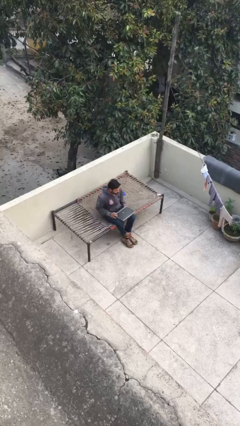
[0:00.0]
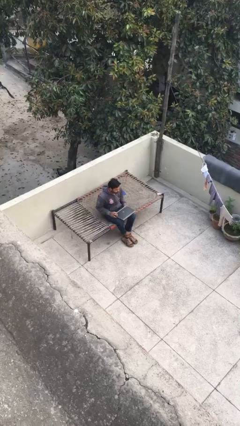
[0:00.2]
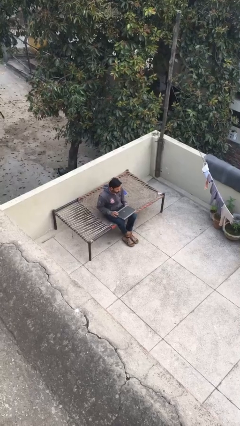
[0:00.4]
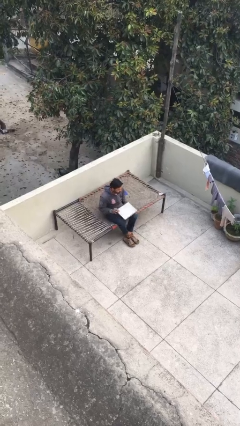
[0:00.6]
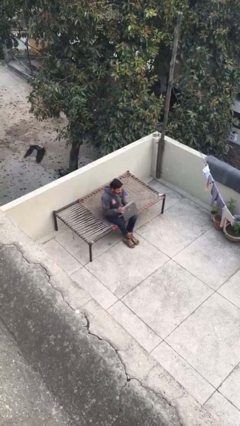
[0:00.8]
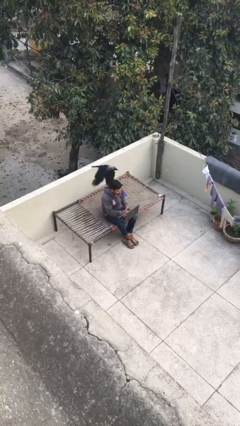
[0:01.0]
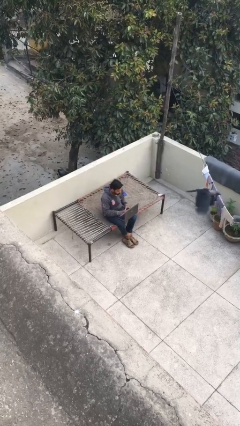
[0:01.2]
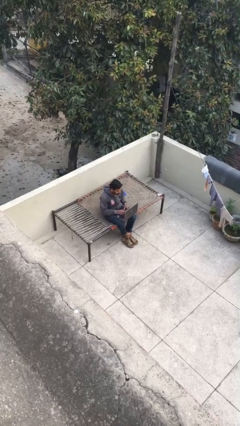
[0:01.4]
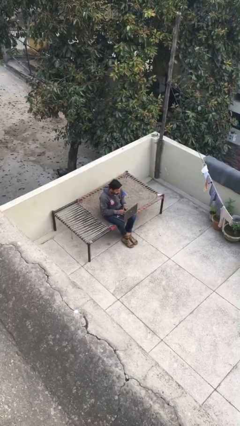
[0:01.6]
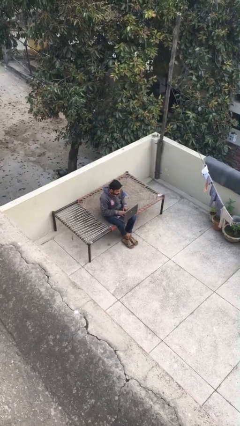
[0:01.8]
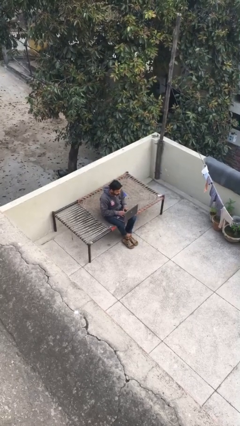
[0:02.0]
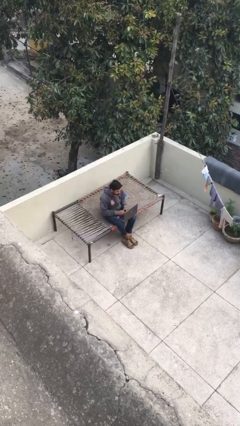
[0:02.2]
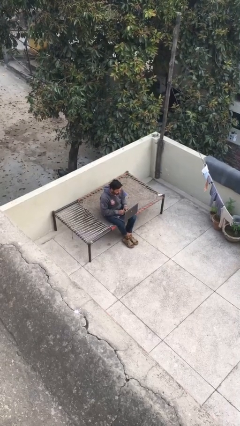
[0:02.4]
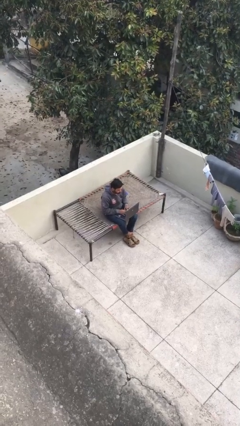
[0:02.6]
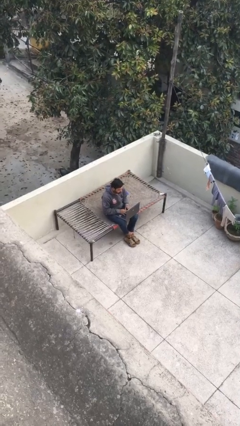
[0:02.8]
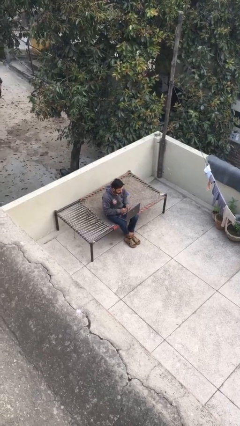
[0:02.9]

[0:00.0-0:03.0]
person interacts with laptop

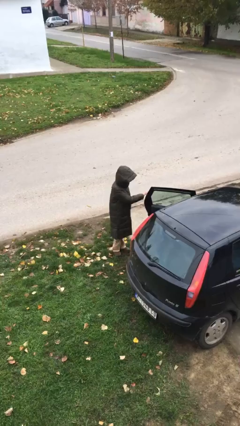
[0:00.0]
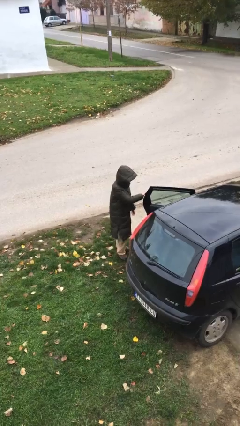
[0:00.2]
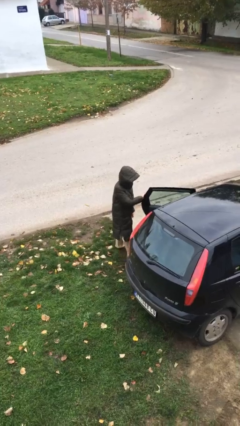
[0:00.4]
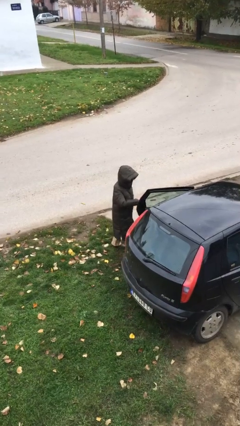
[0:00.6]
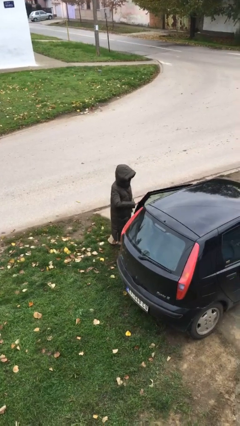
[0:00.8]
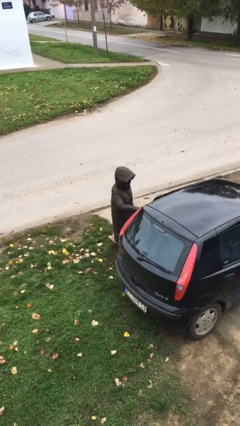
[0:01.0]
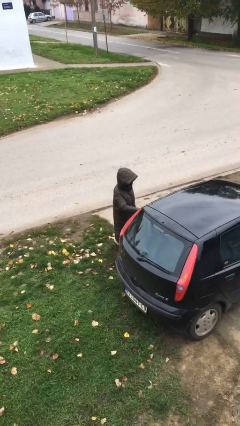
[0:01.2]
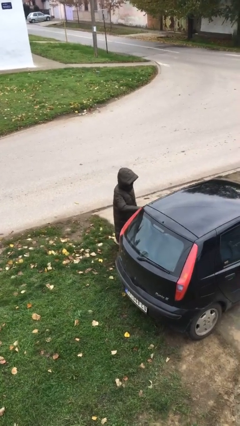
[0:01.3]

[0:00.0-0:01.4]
person closes car door

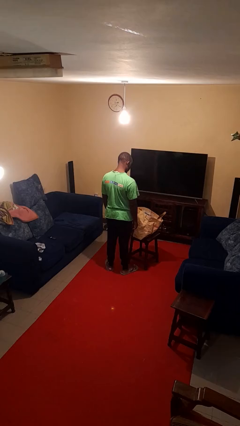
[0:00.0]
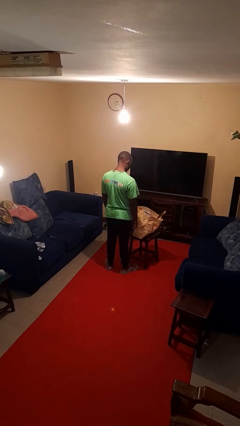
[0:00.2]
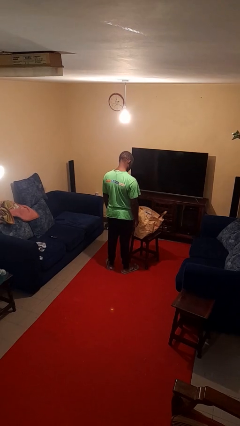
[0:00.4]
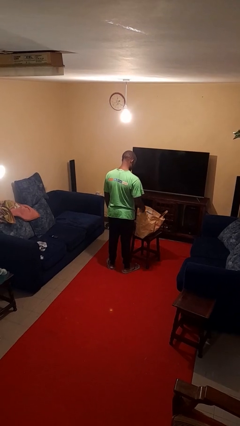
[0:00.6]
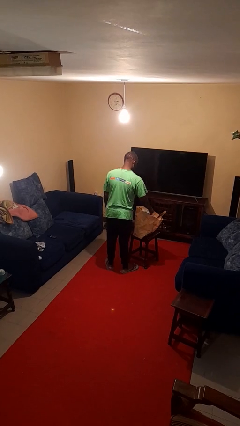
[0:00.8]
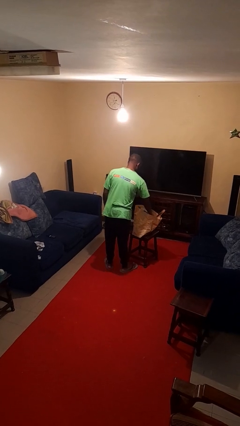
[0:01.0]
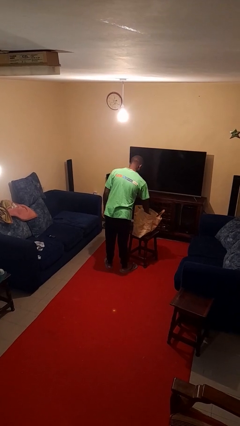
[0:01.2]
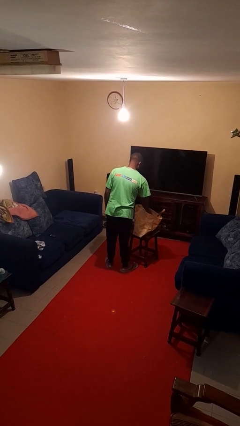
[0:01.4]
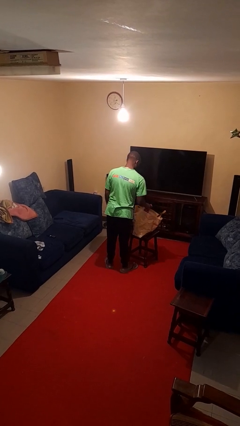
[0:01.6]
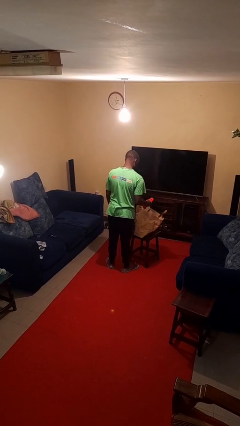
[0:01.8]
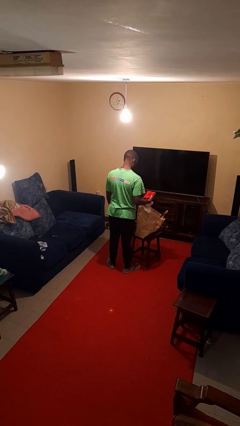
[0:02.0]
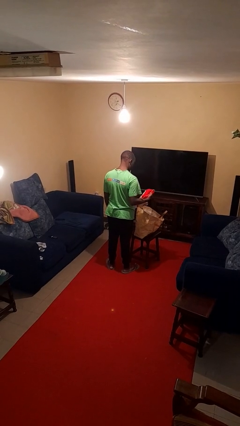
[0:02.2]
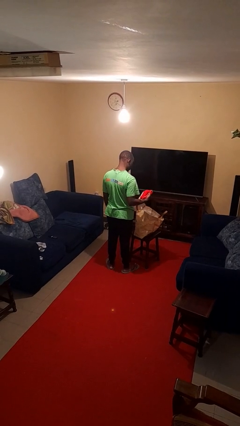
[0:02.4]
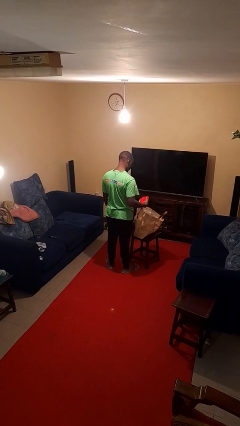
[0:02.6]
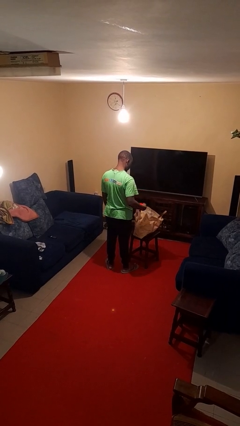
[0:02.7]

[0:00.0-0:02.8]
person takes object from bag

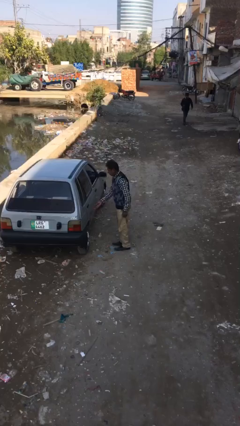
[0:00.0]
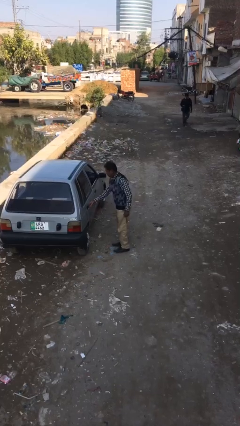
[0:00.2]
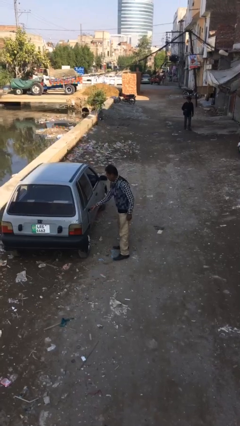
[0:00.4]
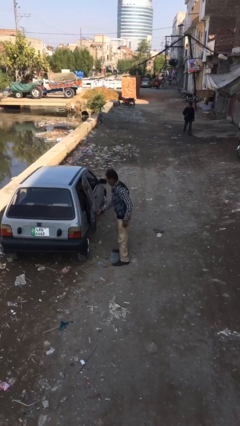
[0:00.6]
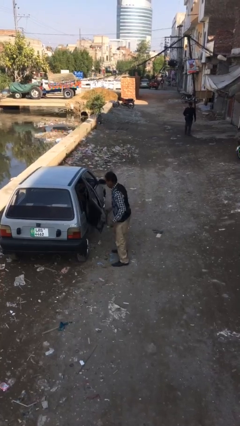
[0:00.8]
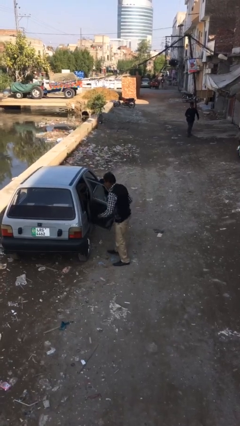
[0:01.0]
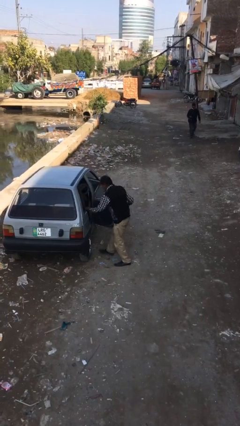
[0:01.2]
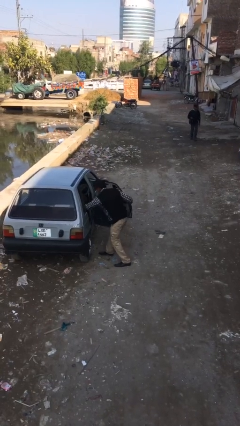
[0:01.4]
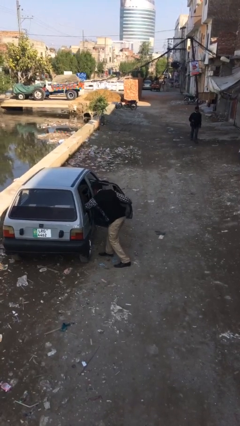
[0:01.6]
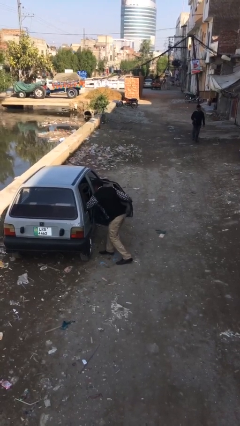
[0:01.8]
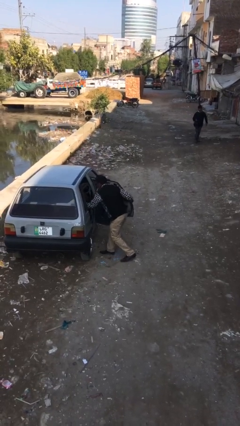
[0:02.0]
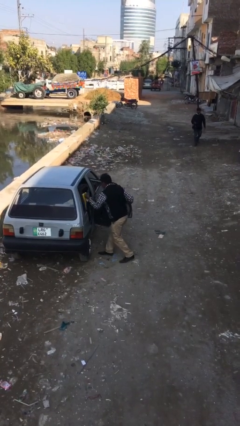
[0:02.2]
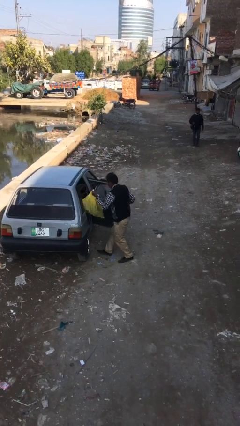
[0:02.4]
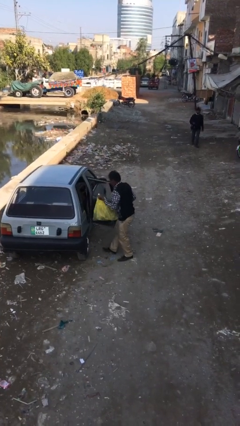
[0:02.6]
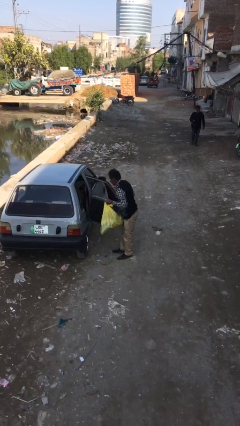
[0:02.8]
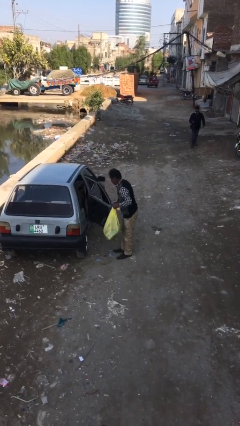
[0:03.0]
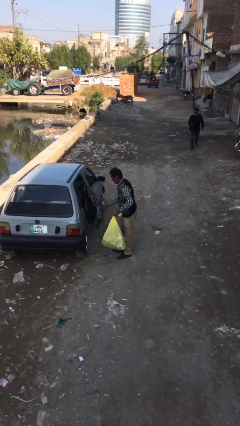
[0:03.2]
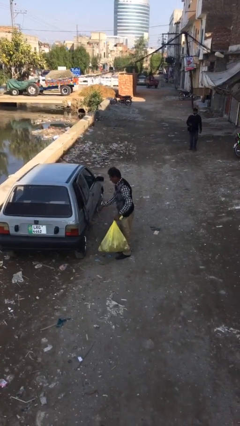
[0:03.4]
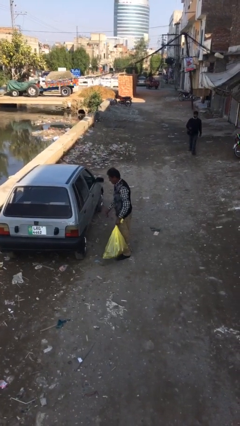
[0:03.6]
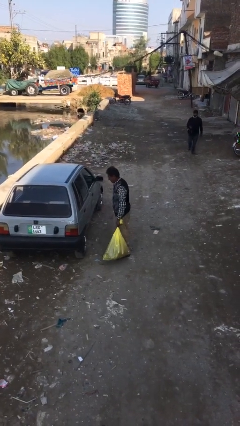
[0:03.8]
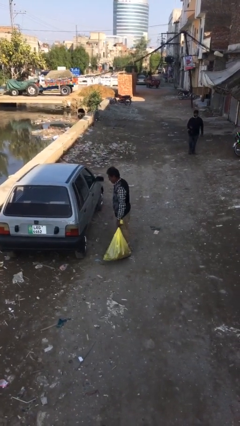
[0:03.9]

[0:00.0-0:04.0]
person unloads car

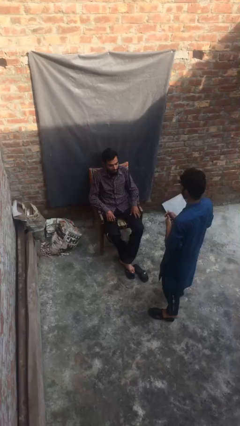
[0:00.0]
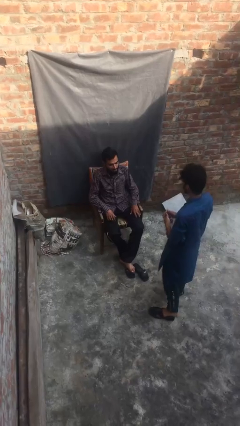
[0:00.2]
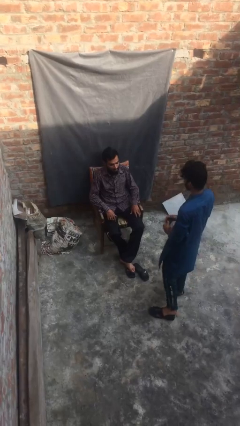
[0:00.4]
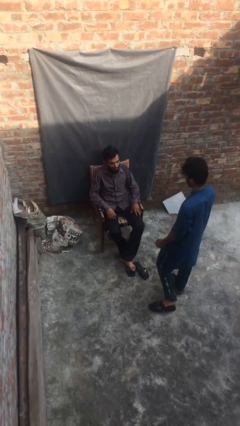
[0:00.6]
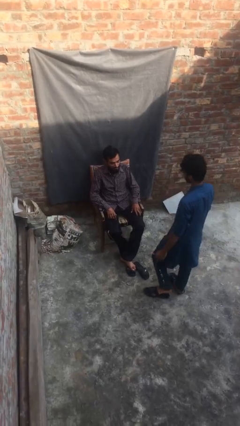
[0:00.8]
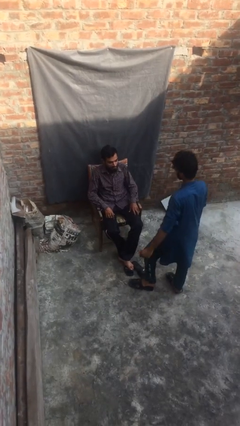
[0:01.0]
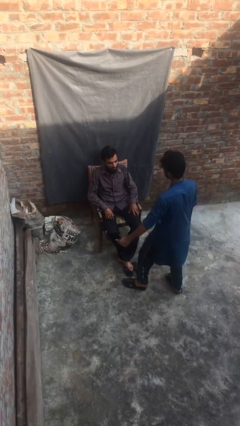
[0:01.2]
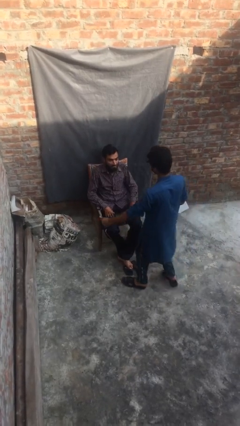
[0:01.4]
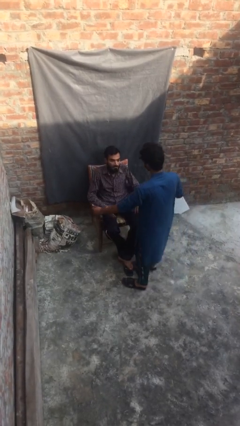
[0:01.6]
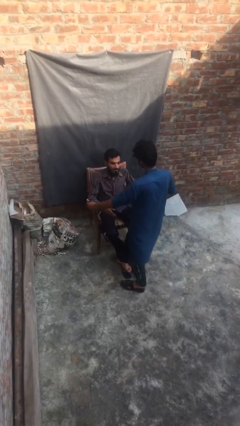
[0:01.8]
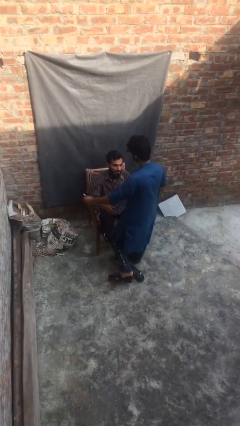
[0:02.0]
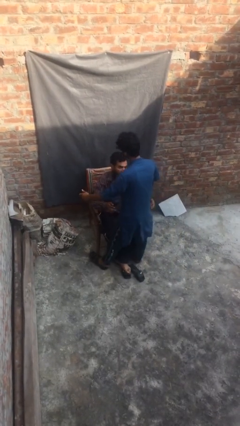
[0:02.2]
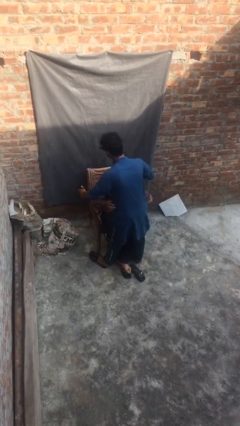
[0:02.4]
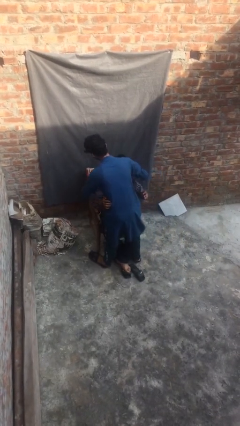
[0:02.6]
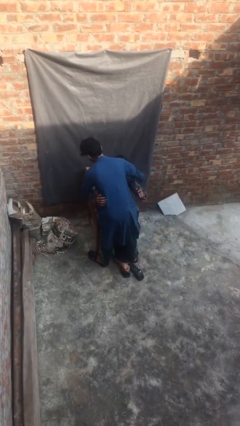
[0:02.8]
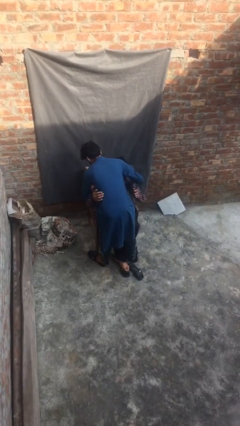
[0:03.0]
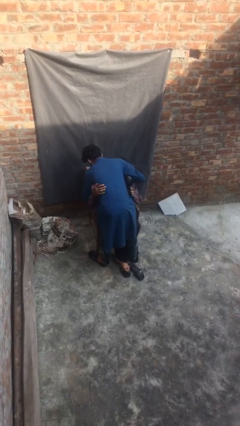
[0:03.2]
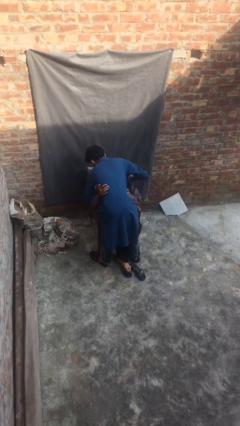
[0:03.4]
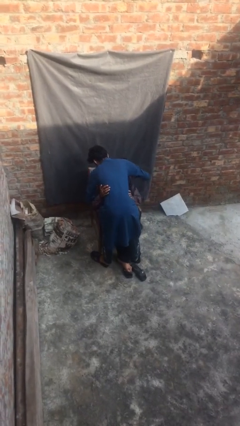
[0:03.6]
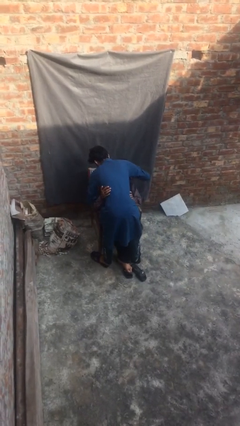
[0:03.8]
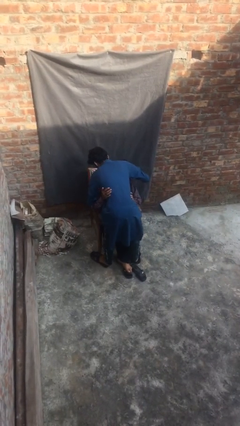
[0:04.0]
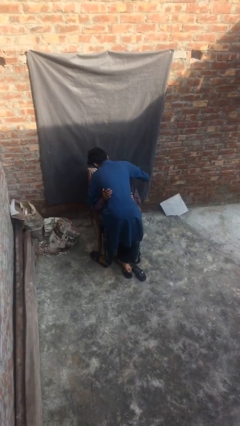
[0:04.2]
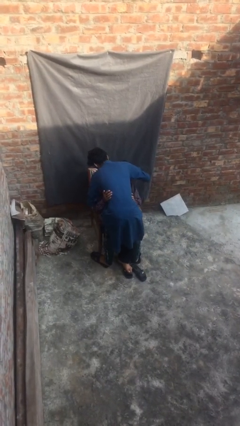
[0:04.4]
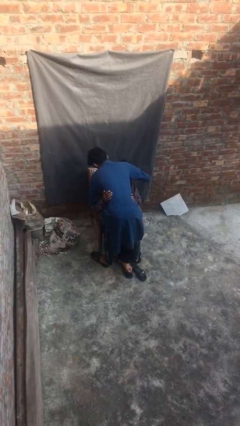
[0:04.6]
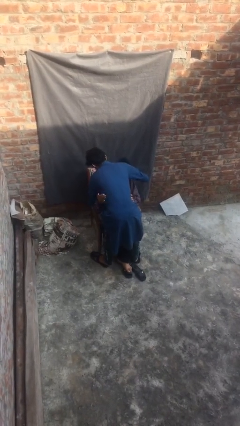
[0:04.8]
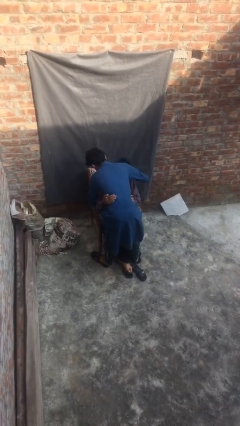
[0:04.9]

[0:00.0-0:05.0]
person embraces person

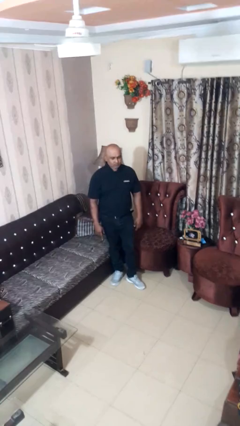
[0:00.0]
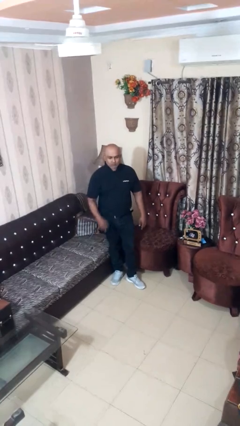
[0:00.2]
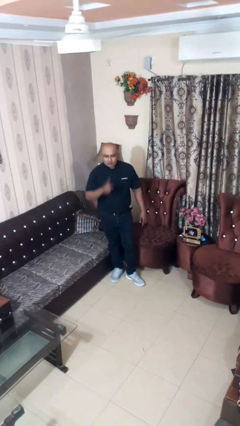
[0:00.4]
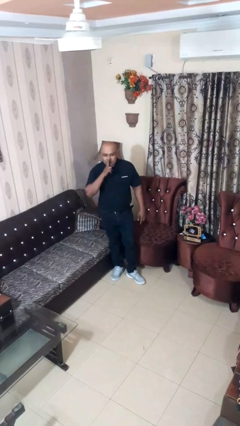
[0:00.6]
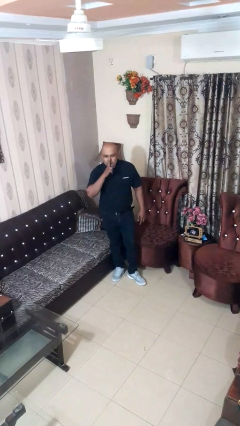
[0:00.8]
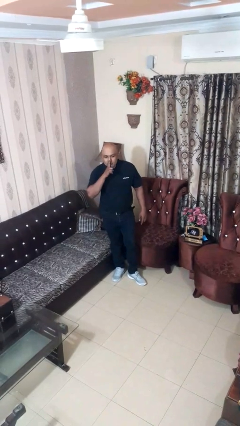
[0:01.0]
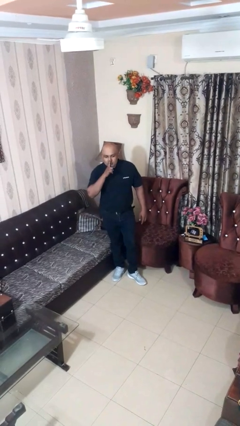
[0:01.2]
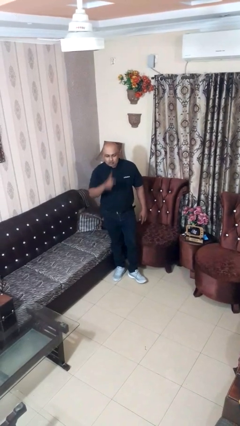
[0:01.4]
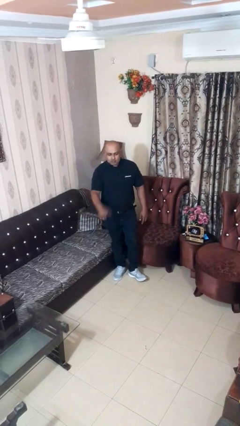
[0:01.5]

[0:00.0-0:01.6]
person gestures be quiet
